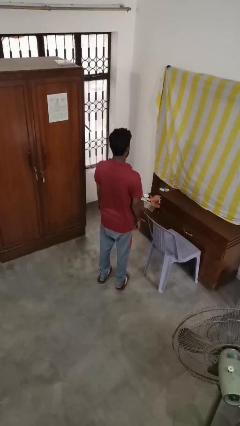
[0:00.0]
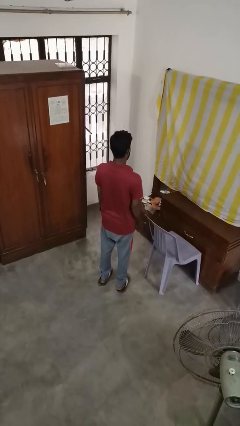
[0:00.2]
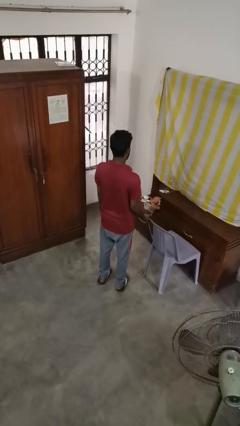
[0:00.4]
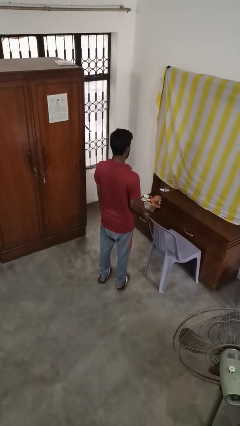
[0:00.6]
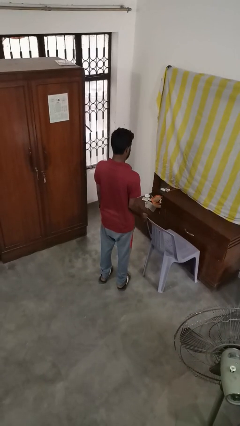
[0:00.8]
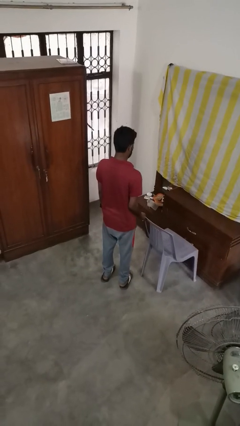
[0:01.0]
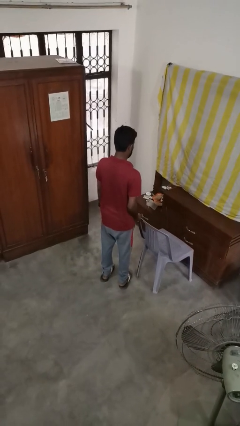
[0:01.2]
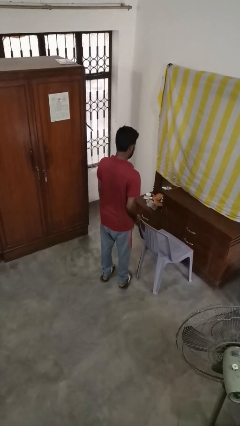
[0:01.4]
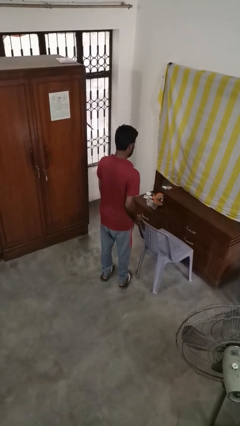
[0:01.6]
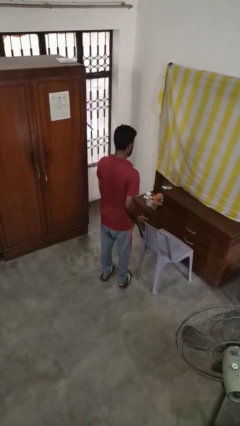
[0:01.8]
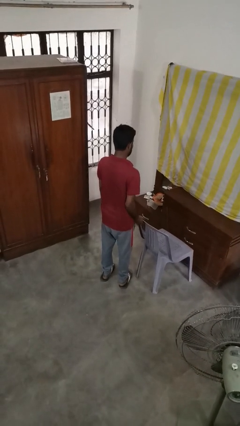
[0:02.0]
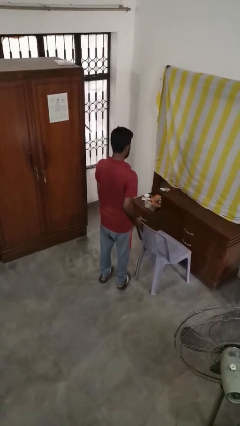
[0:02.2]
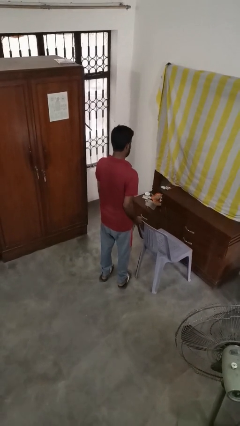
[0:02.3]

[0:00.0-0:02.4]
person pulls out chair

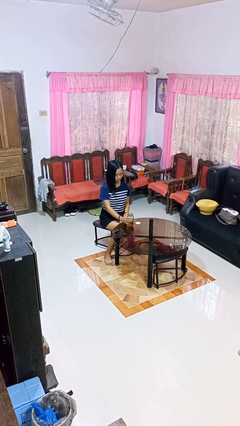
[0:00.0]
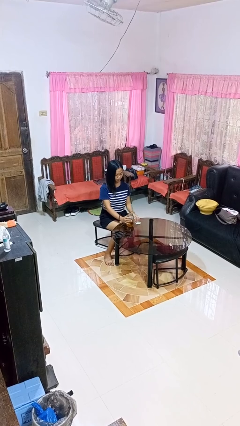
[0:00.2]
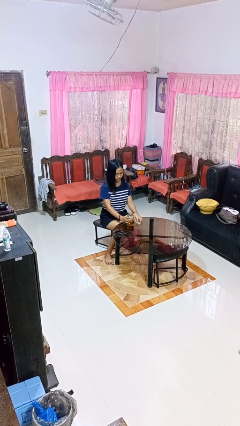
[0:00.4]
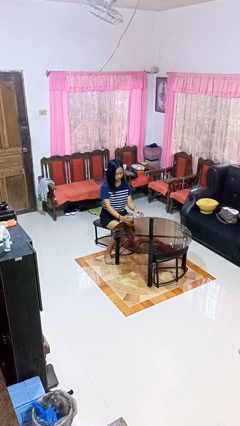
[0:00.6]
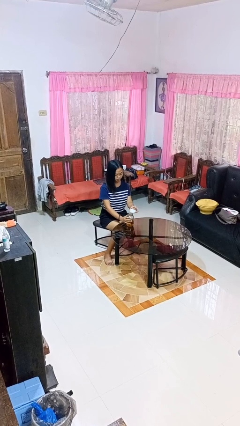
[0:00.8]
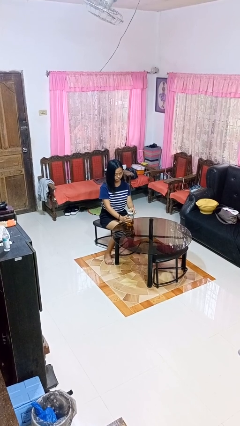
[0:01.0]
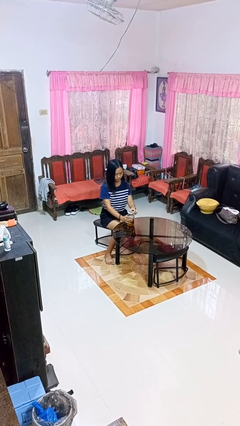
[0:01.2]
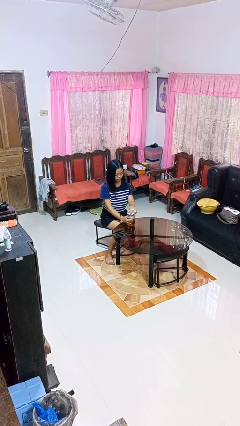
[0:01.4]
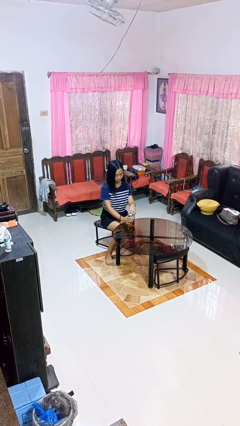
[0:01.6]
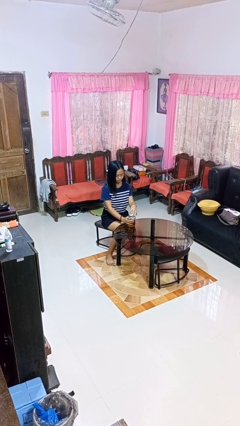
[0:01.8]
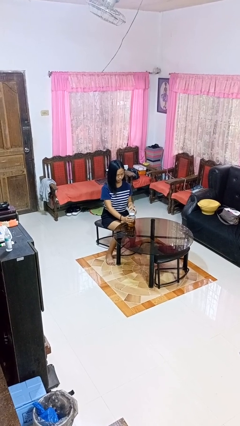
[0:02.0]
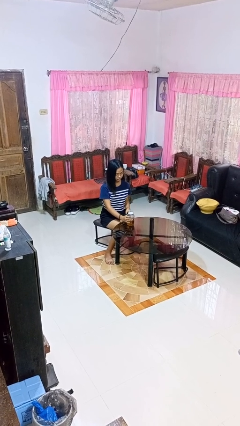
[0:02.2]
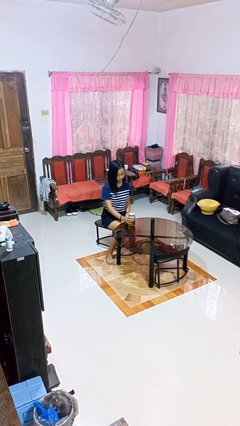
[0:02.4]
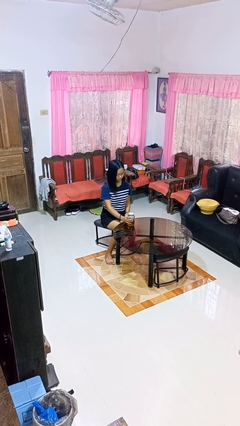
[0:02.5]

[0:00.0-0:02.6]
person closes jar

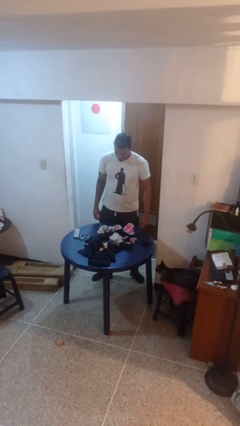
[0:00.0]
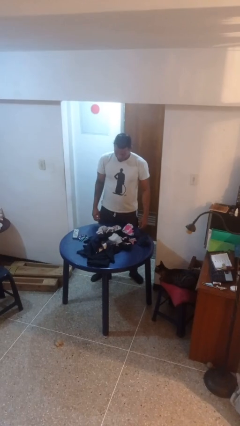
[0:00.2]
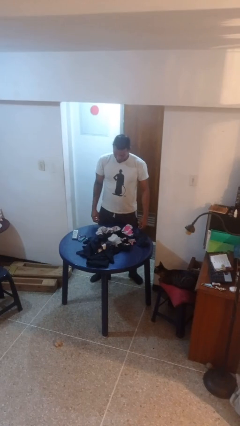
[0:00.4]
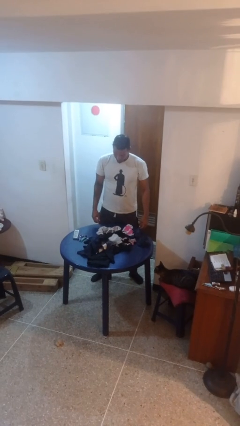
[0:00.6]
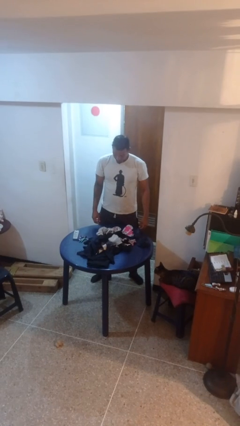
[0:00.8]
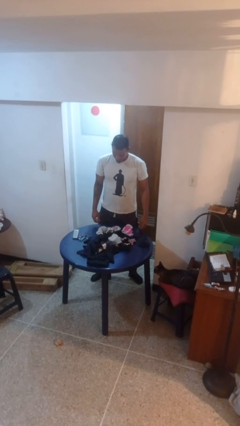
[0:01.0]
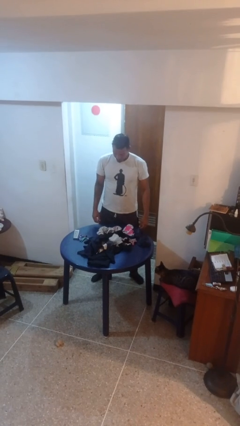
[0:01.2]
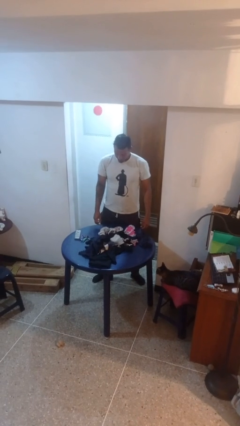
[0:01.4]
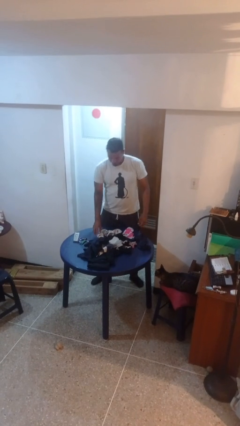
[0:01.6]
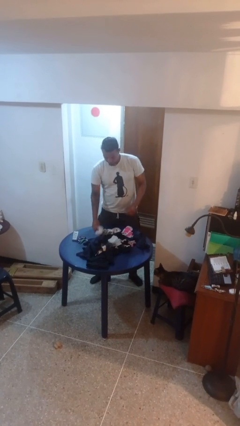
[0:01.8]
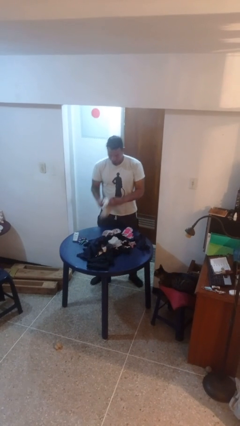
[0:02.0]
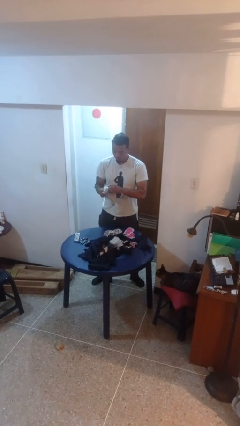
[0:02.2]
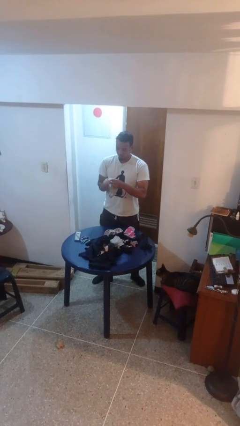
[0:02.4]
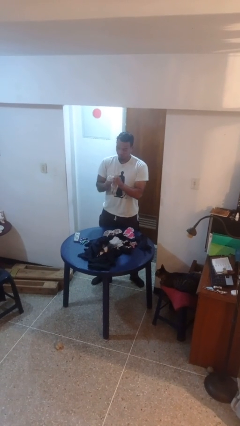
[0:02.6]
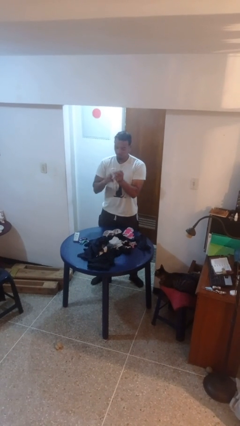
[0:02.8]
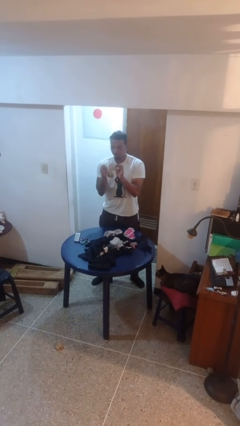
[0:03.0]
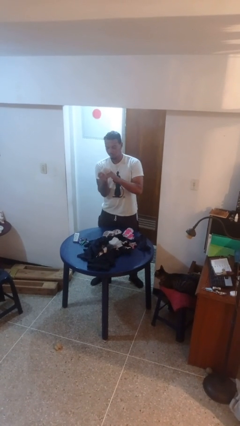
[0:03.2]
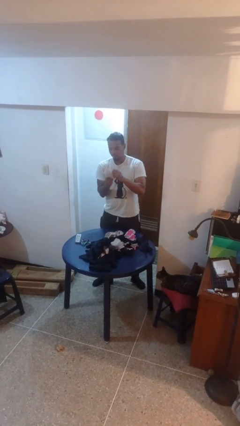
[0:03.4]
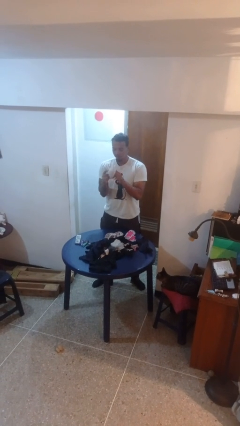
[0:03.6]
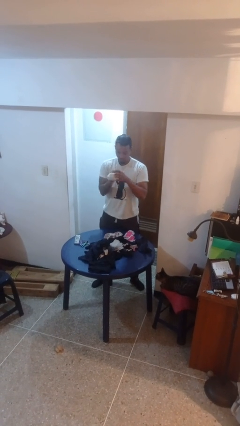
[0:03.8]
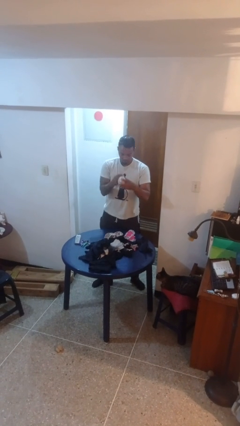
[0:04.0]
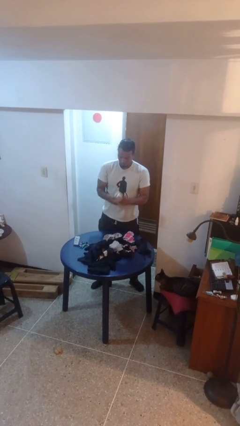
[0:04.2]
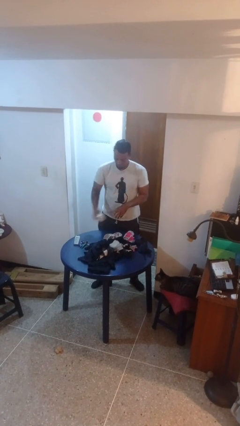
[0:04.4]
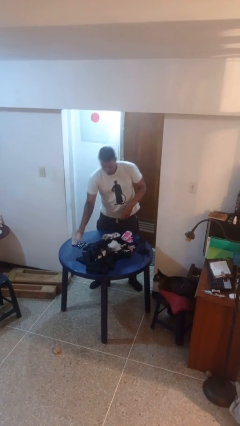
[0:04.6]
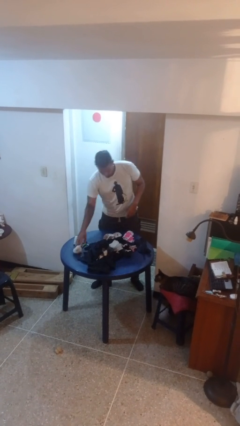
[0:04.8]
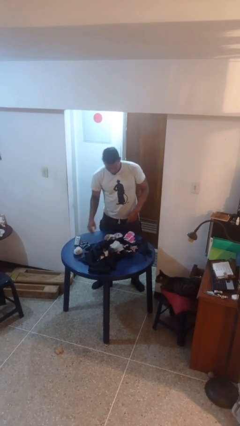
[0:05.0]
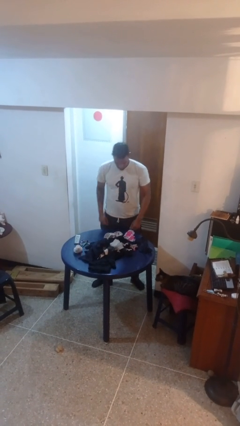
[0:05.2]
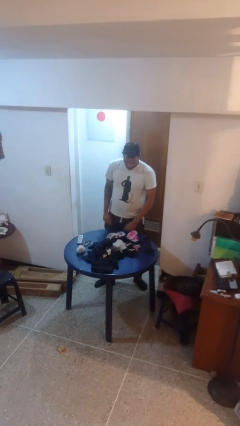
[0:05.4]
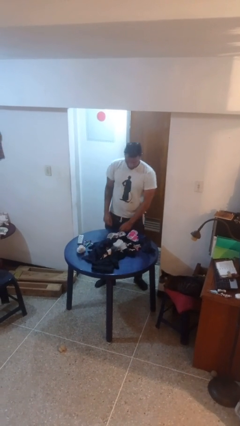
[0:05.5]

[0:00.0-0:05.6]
person folds socks

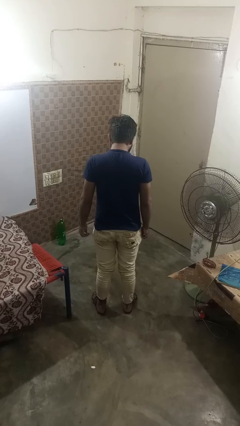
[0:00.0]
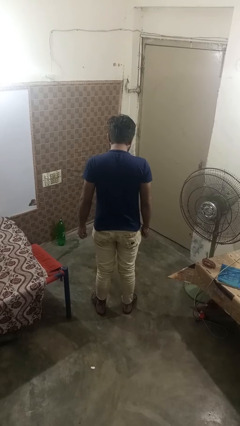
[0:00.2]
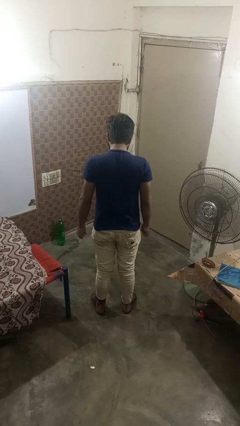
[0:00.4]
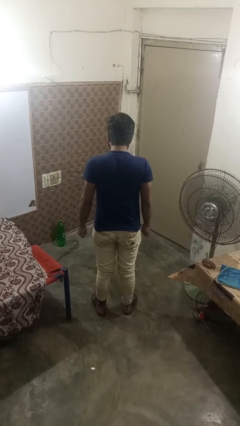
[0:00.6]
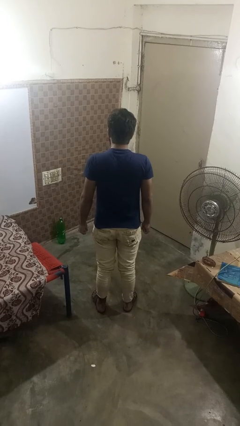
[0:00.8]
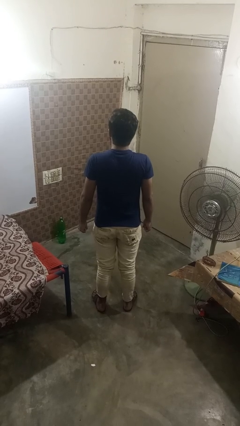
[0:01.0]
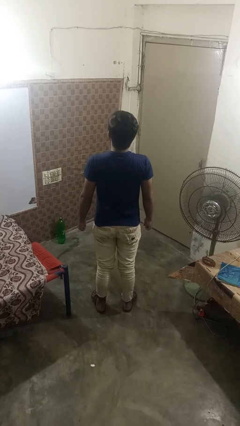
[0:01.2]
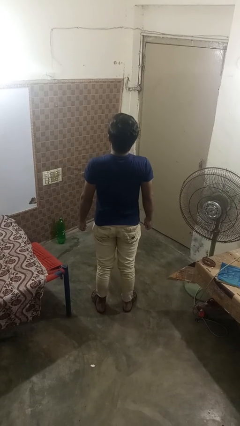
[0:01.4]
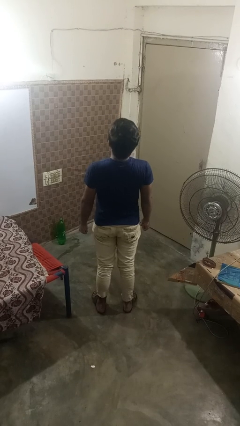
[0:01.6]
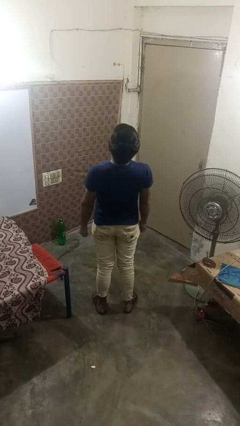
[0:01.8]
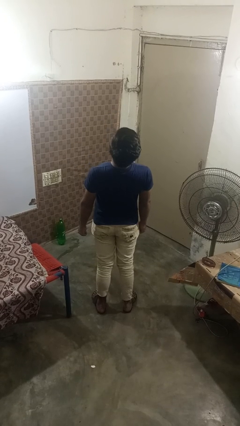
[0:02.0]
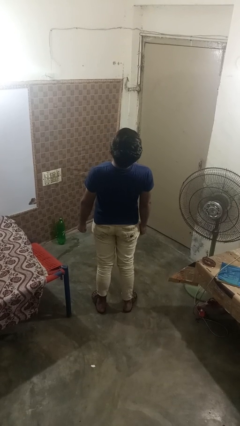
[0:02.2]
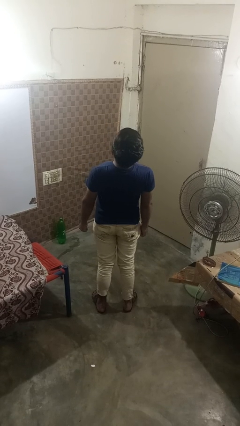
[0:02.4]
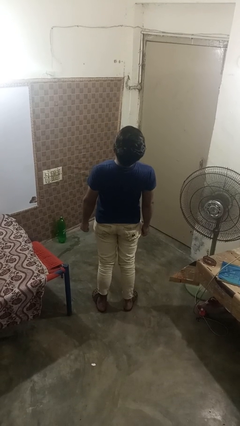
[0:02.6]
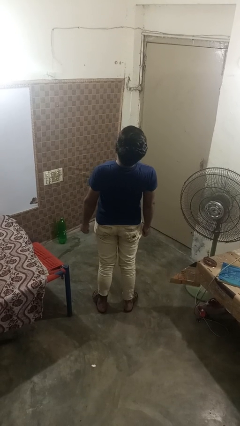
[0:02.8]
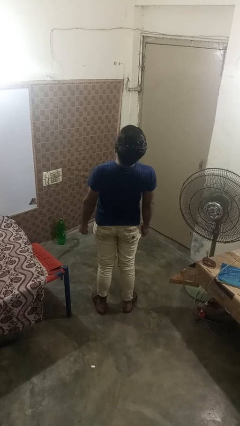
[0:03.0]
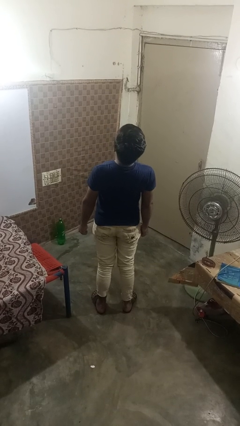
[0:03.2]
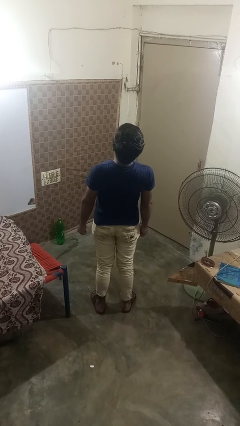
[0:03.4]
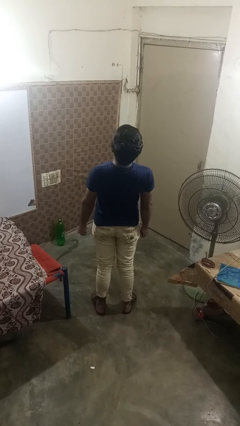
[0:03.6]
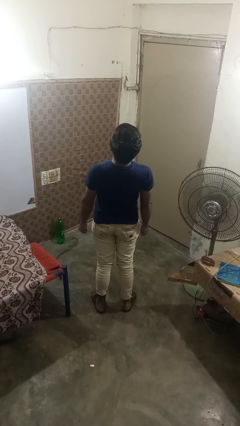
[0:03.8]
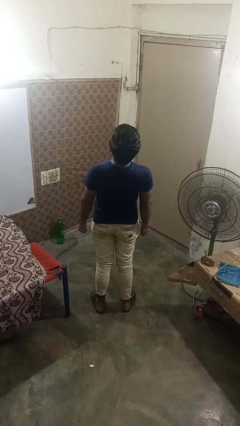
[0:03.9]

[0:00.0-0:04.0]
person stretches back

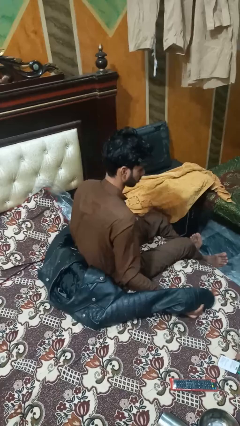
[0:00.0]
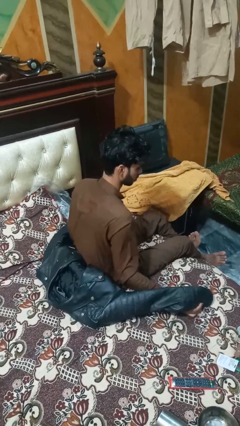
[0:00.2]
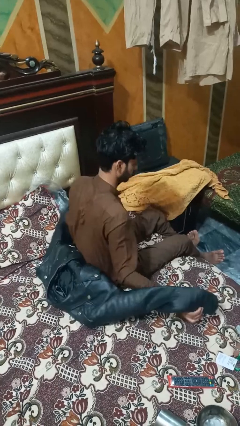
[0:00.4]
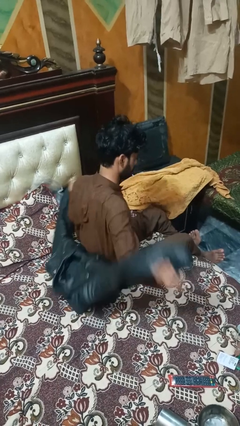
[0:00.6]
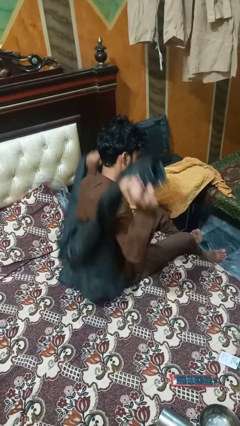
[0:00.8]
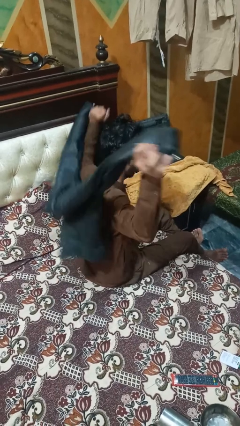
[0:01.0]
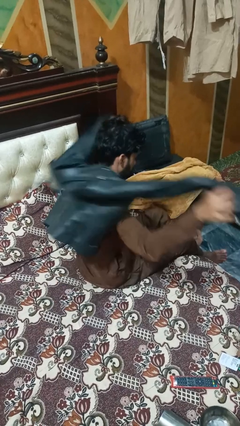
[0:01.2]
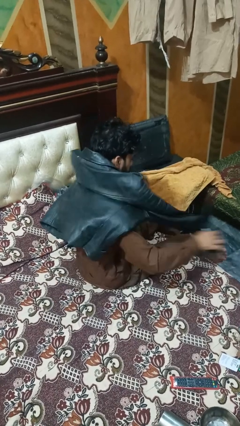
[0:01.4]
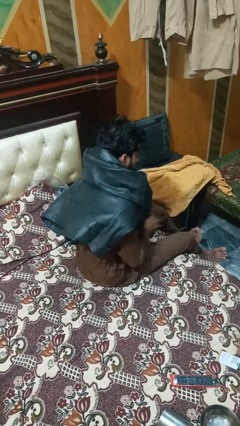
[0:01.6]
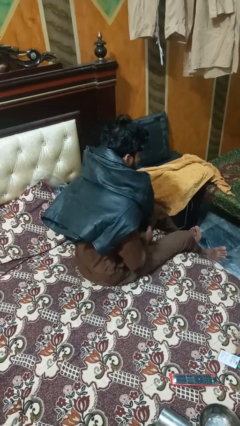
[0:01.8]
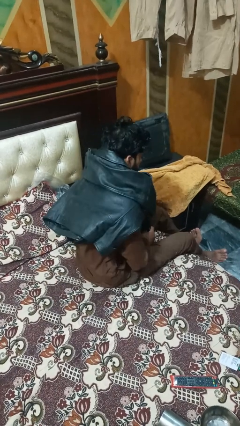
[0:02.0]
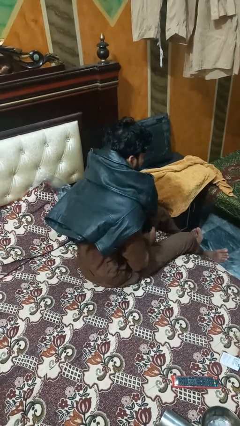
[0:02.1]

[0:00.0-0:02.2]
person ties jacket around waist

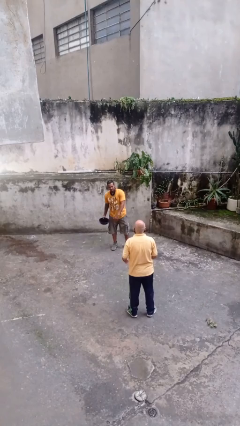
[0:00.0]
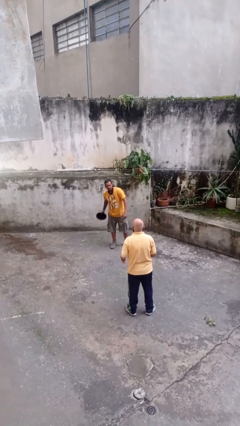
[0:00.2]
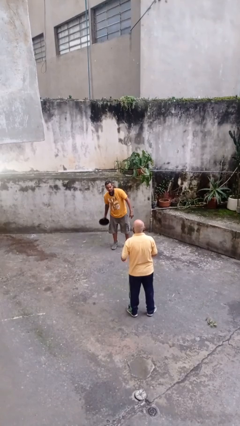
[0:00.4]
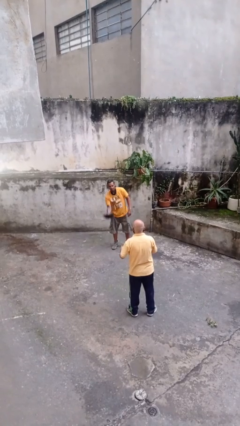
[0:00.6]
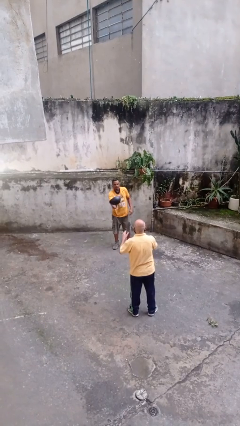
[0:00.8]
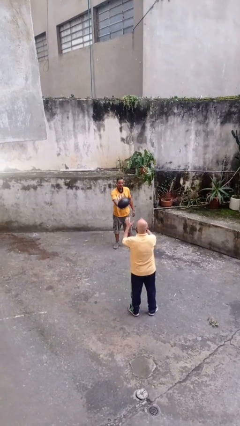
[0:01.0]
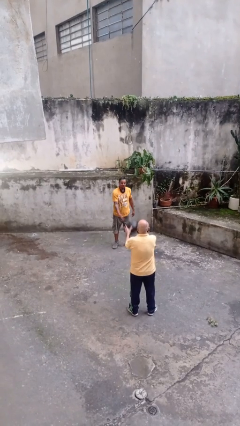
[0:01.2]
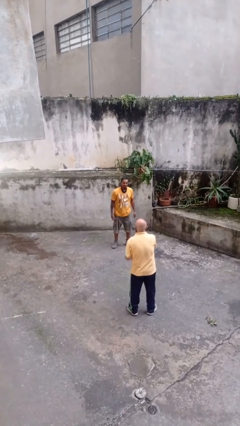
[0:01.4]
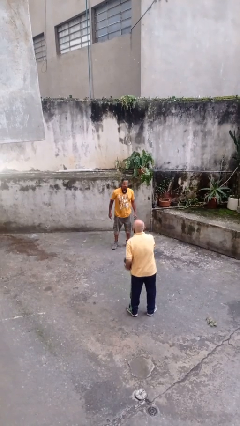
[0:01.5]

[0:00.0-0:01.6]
person throws object to person
